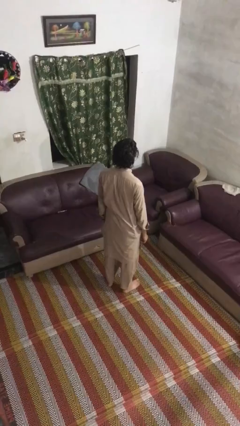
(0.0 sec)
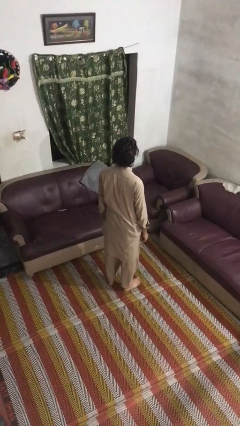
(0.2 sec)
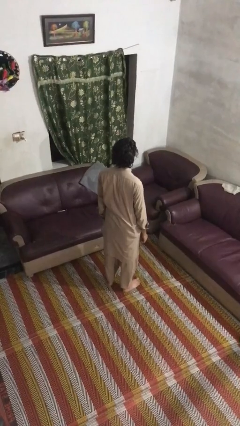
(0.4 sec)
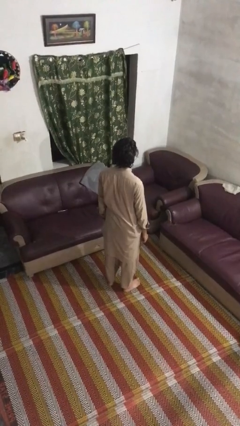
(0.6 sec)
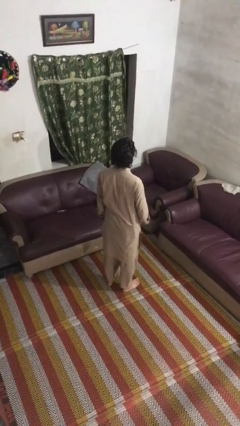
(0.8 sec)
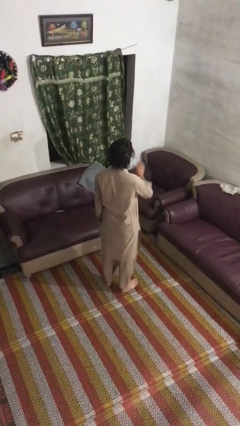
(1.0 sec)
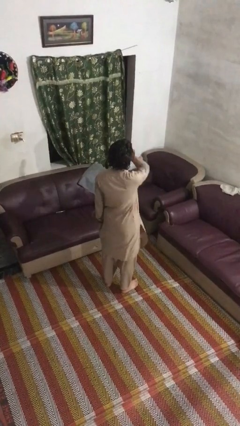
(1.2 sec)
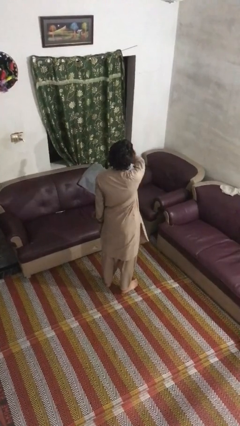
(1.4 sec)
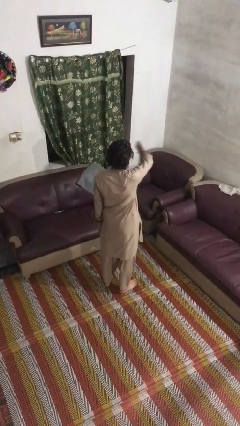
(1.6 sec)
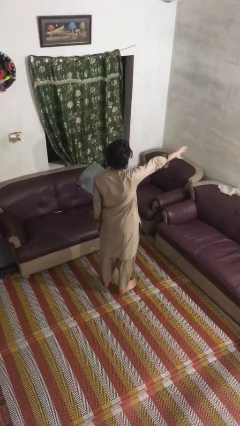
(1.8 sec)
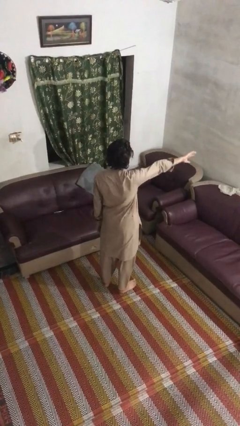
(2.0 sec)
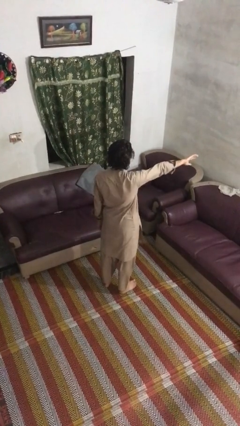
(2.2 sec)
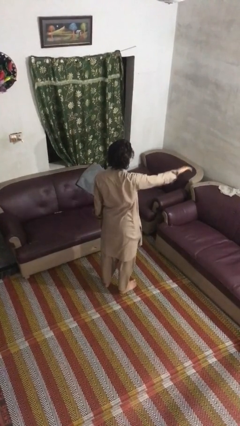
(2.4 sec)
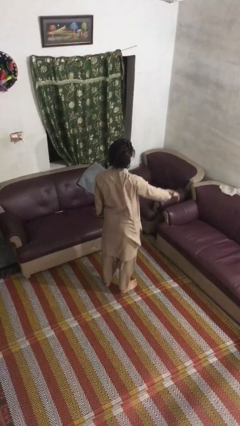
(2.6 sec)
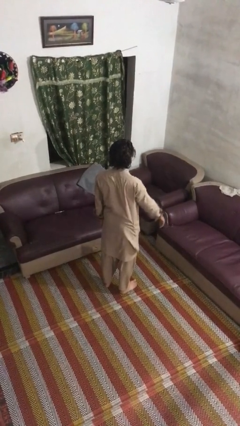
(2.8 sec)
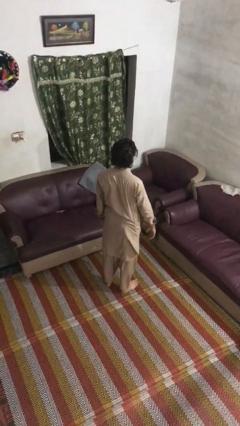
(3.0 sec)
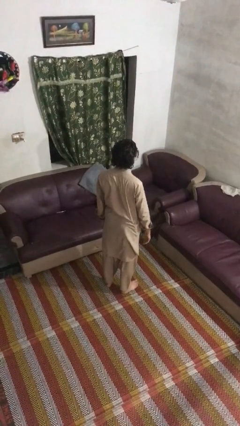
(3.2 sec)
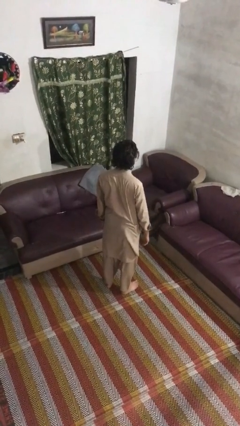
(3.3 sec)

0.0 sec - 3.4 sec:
person gestures swipe right

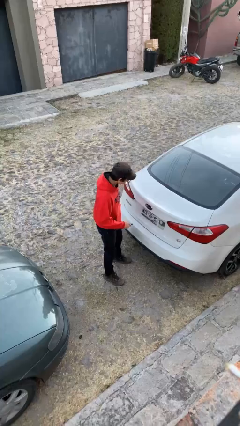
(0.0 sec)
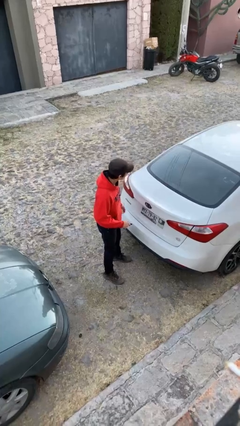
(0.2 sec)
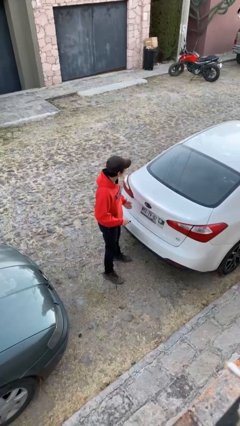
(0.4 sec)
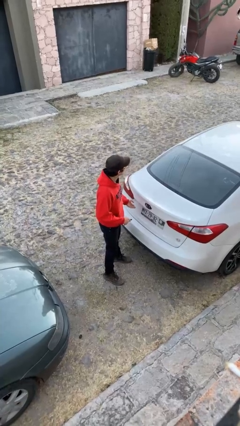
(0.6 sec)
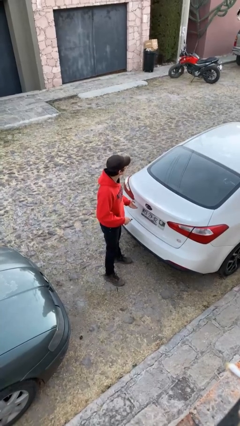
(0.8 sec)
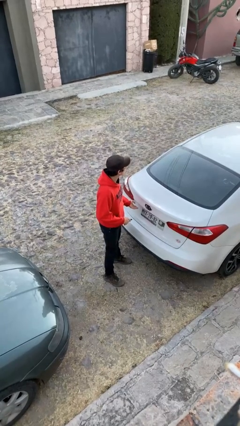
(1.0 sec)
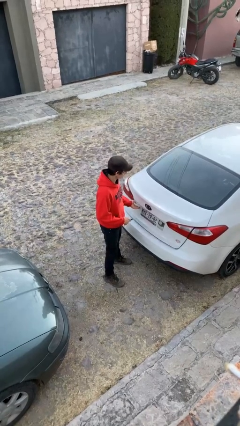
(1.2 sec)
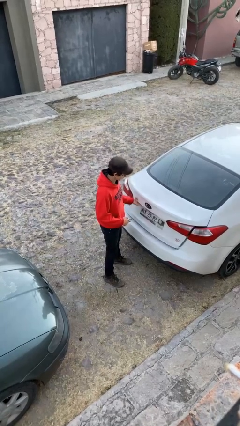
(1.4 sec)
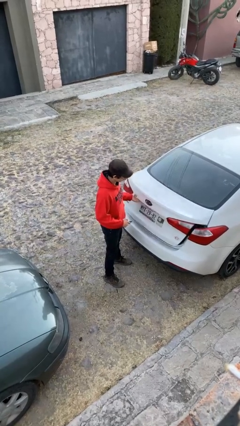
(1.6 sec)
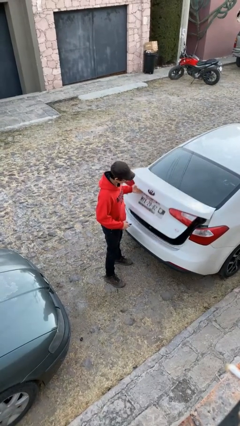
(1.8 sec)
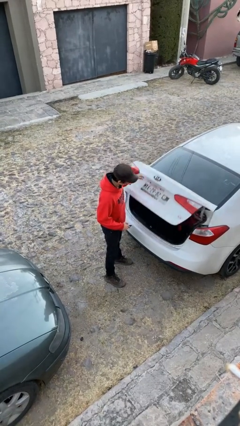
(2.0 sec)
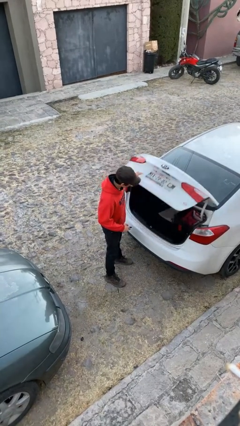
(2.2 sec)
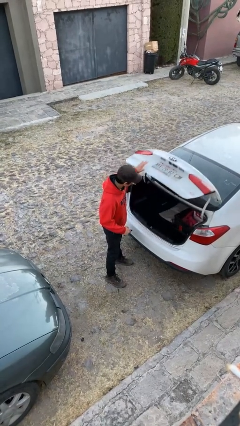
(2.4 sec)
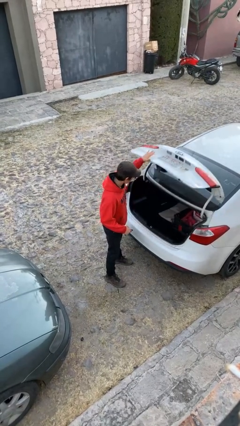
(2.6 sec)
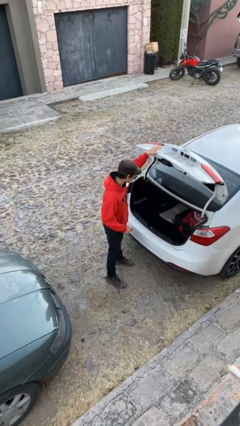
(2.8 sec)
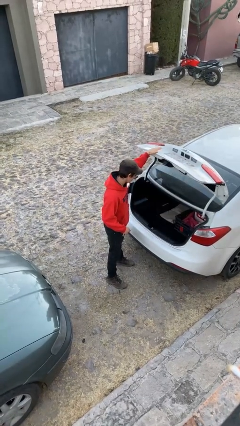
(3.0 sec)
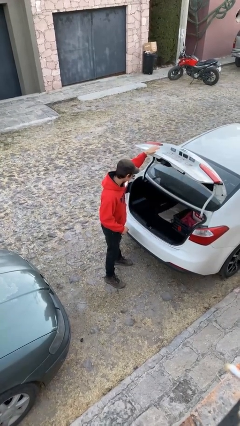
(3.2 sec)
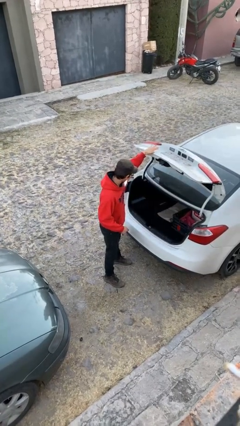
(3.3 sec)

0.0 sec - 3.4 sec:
person opens car trunk

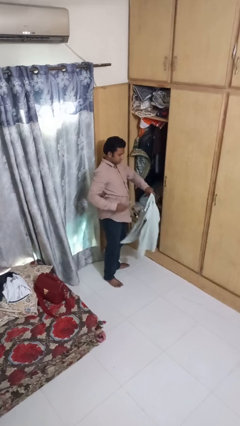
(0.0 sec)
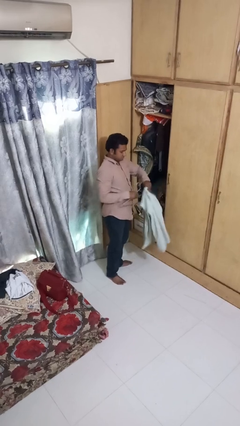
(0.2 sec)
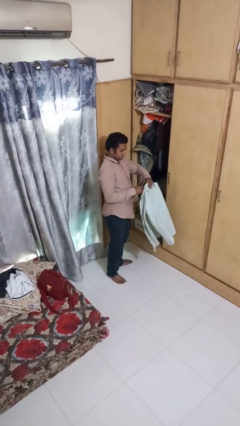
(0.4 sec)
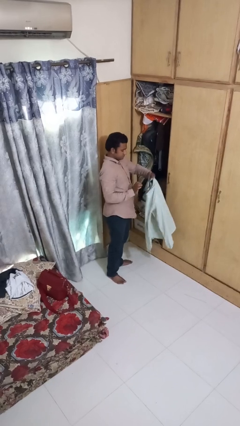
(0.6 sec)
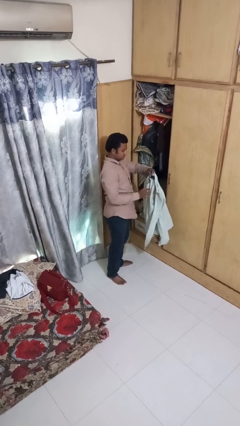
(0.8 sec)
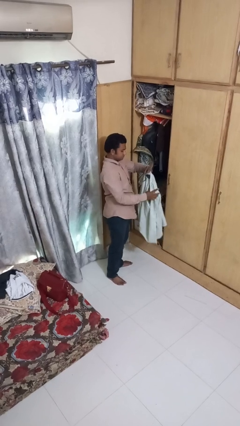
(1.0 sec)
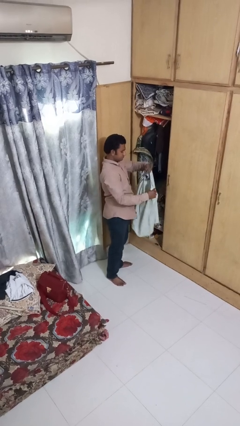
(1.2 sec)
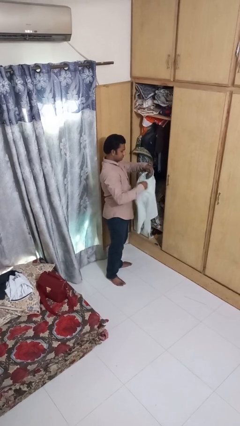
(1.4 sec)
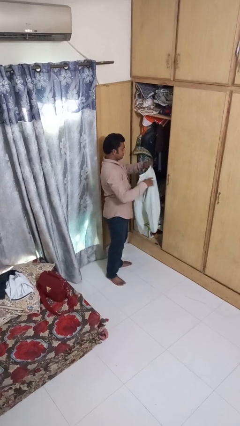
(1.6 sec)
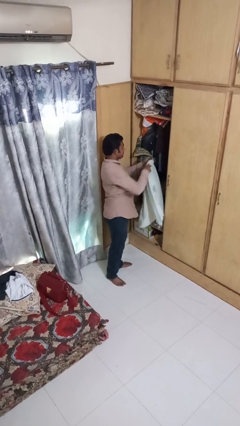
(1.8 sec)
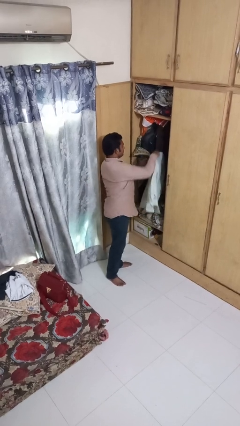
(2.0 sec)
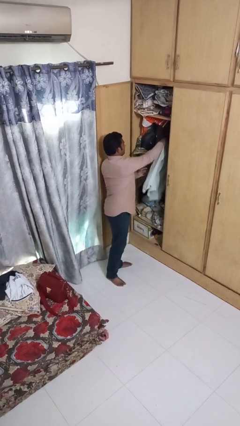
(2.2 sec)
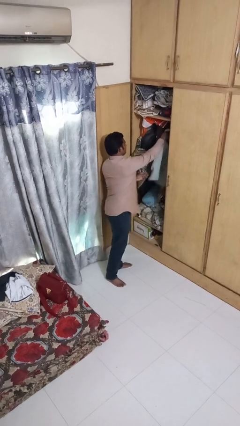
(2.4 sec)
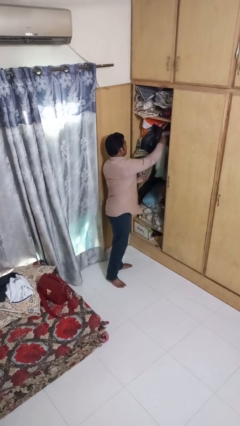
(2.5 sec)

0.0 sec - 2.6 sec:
person puts clothes into closet

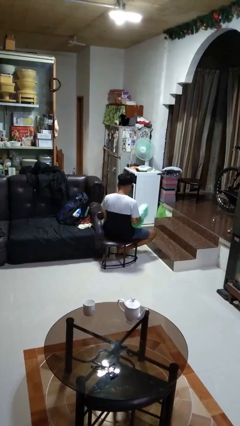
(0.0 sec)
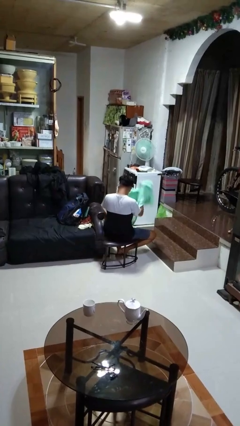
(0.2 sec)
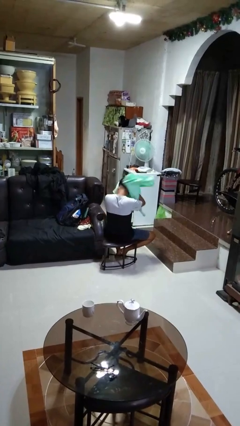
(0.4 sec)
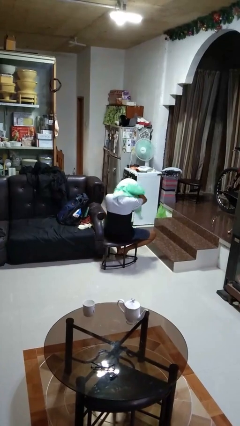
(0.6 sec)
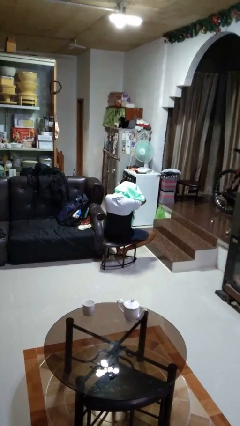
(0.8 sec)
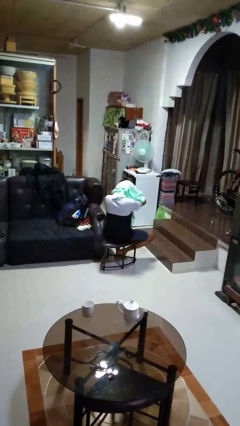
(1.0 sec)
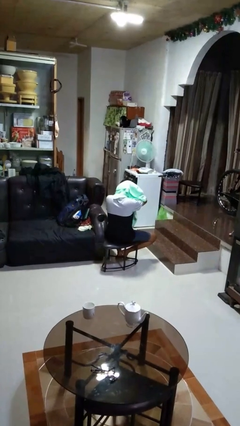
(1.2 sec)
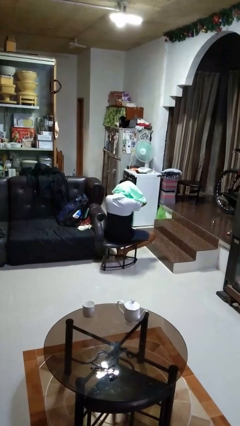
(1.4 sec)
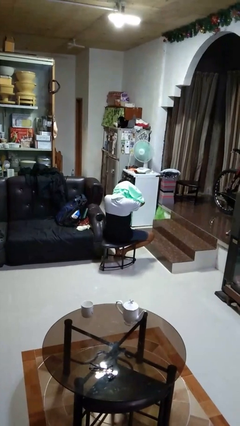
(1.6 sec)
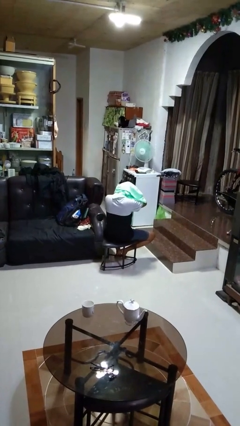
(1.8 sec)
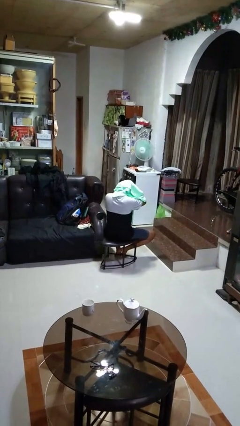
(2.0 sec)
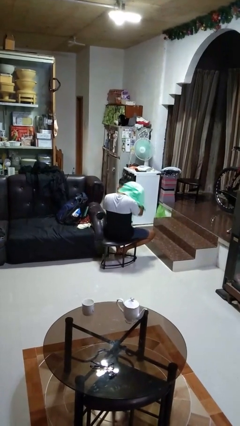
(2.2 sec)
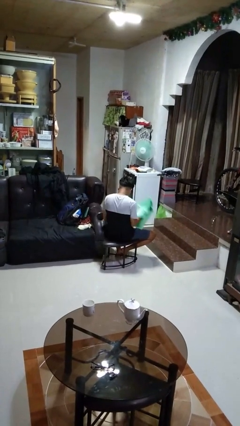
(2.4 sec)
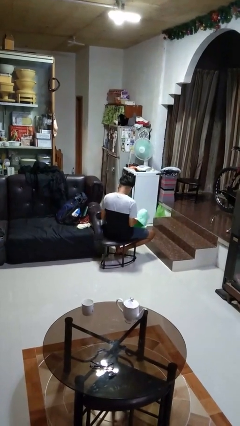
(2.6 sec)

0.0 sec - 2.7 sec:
person dries hair with towel

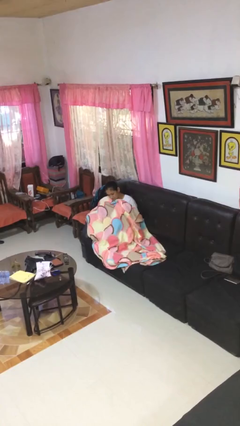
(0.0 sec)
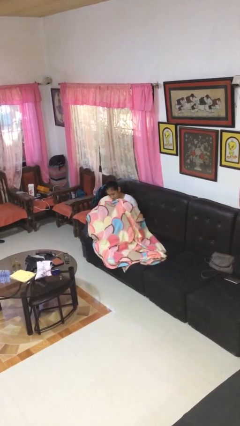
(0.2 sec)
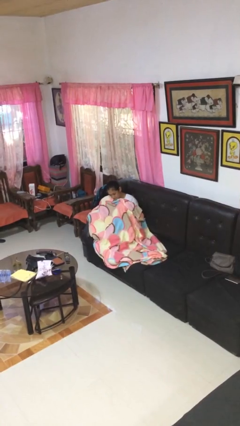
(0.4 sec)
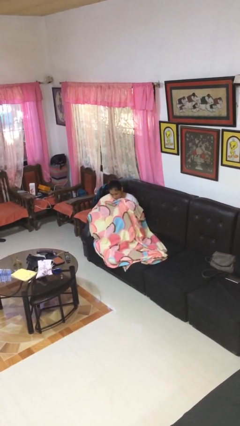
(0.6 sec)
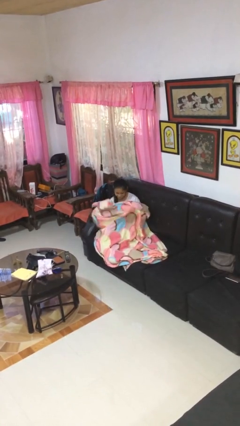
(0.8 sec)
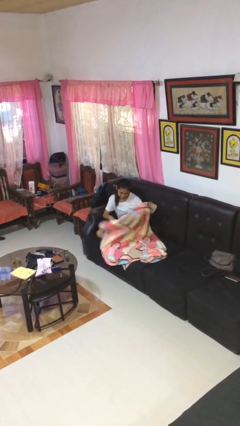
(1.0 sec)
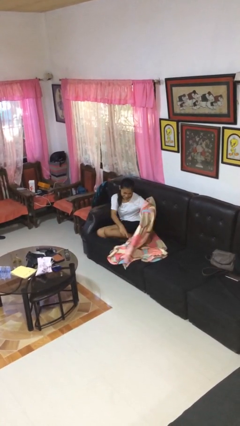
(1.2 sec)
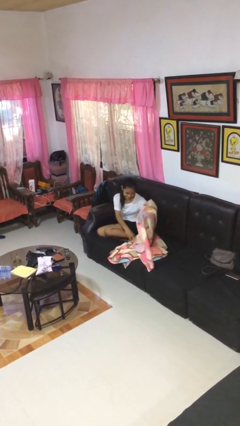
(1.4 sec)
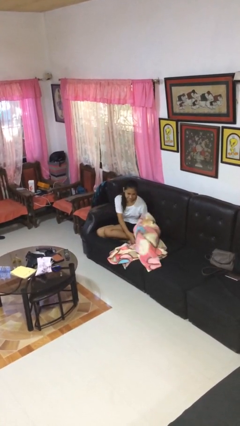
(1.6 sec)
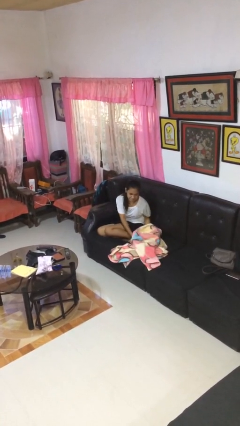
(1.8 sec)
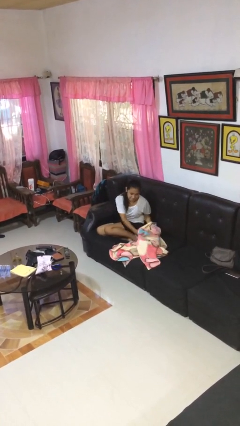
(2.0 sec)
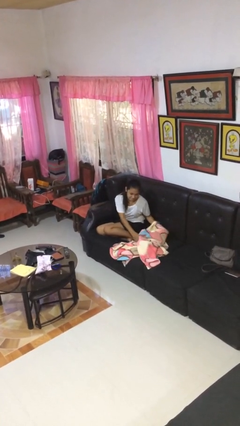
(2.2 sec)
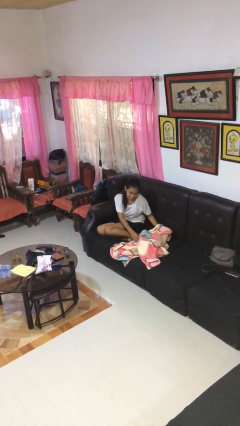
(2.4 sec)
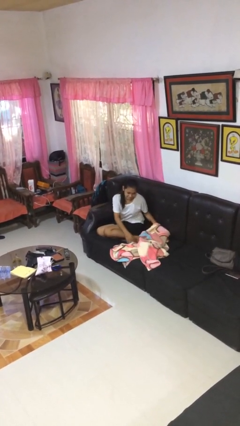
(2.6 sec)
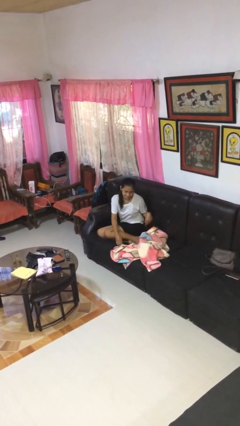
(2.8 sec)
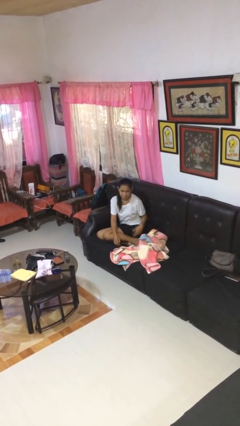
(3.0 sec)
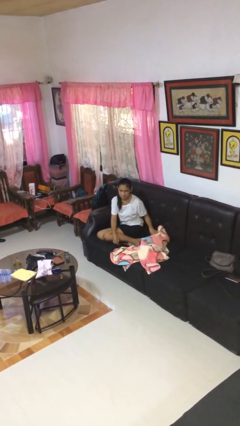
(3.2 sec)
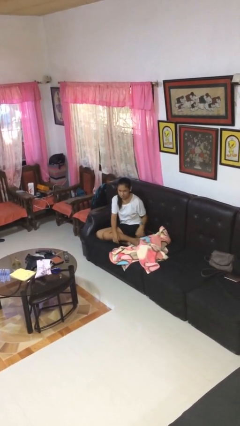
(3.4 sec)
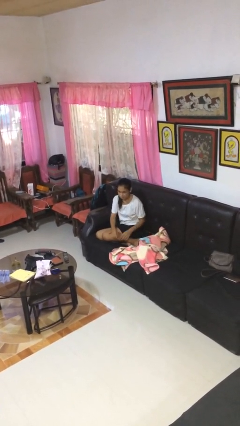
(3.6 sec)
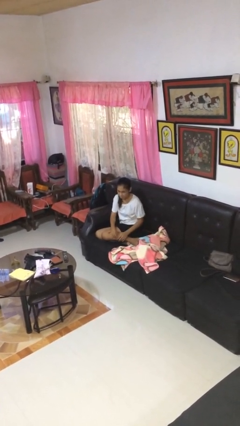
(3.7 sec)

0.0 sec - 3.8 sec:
person uncovers with blanket

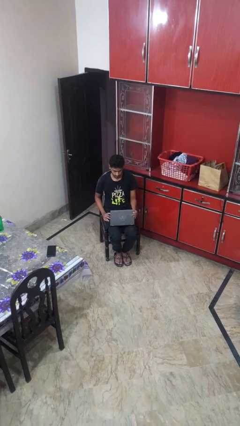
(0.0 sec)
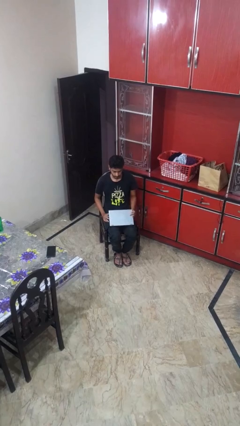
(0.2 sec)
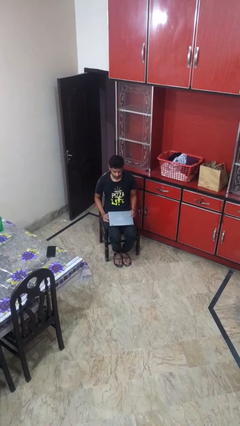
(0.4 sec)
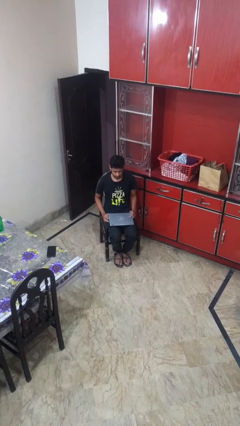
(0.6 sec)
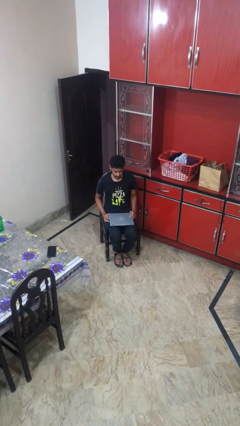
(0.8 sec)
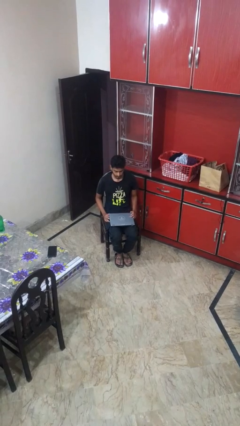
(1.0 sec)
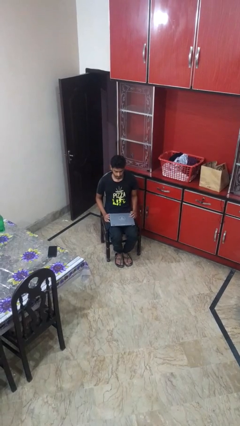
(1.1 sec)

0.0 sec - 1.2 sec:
person closes laptop

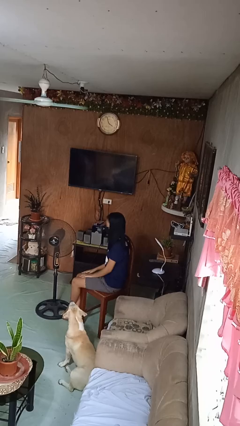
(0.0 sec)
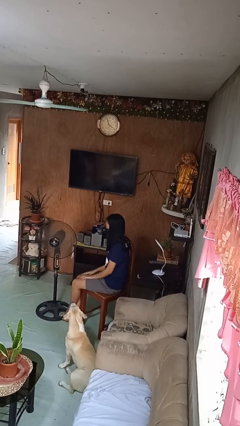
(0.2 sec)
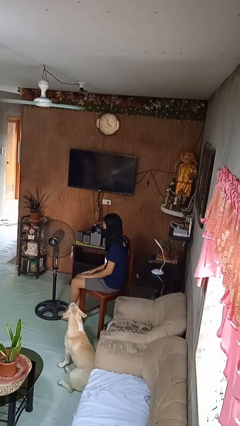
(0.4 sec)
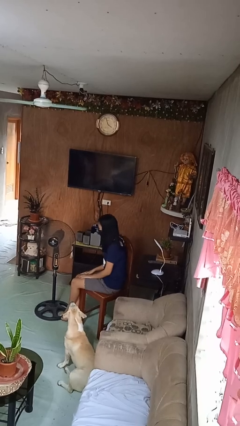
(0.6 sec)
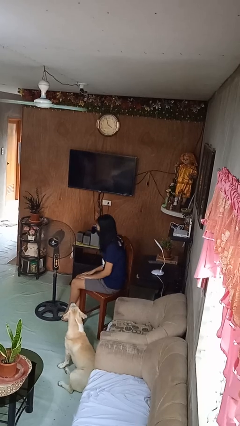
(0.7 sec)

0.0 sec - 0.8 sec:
person turns on fan
